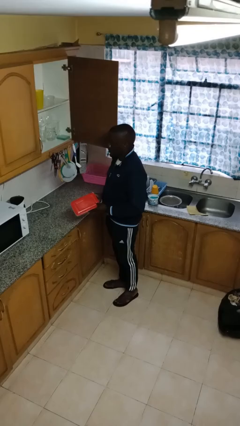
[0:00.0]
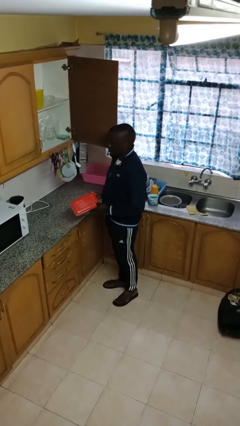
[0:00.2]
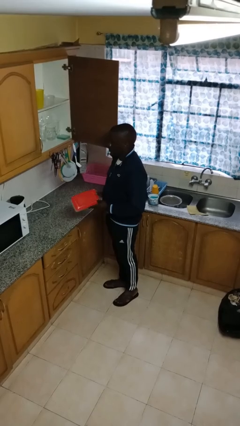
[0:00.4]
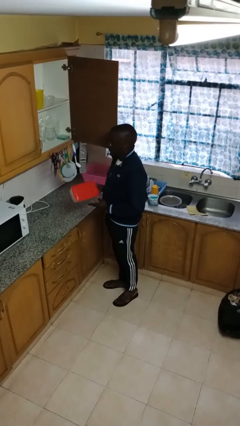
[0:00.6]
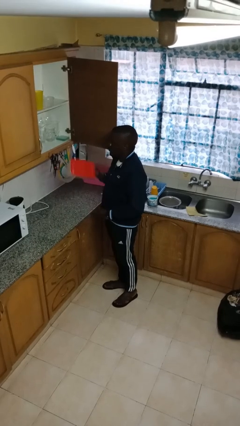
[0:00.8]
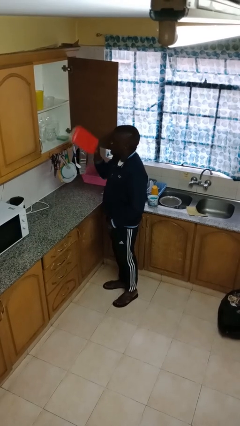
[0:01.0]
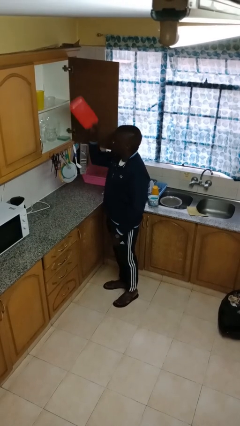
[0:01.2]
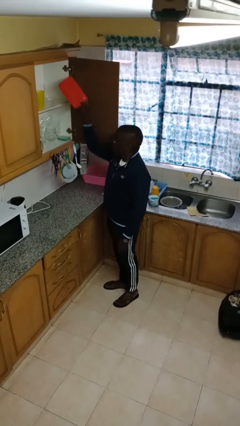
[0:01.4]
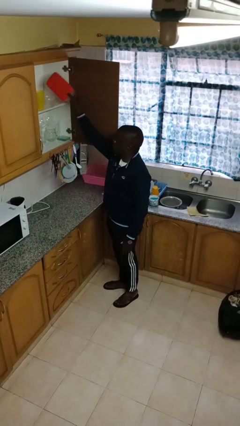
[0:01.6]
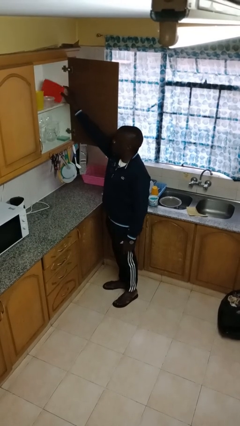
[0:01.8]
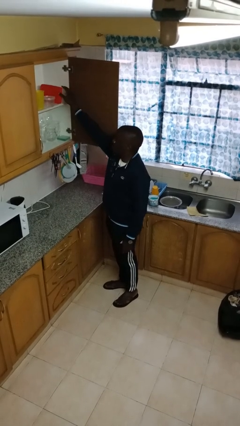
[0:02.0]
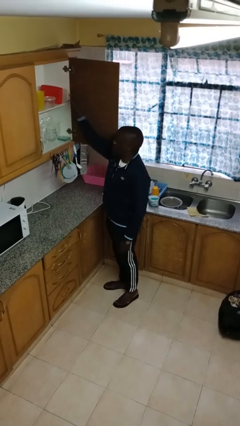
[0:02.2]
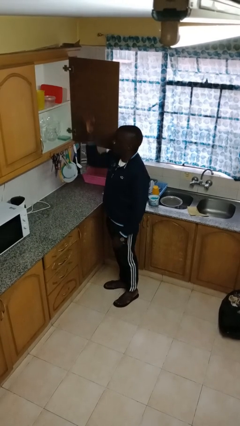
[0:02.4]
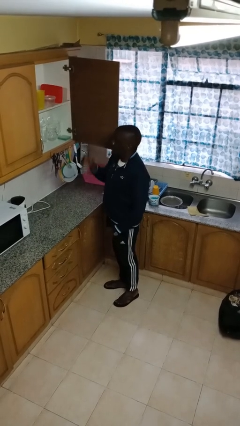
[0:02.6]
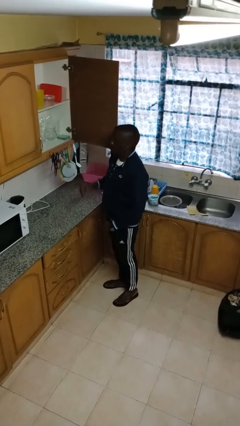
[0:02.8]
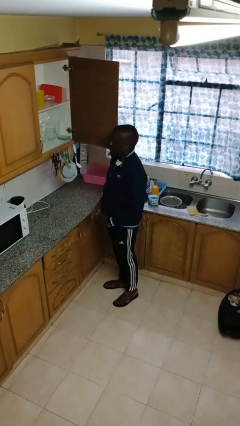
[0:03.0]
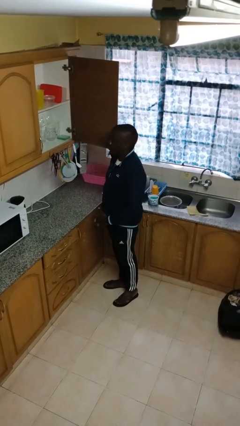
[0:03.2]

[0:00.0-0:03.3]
person puts down object on shelf

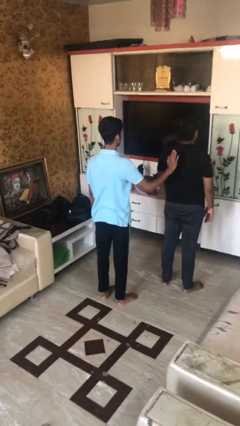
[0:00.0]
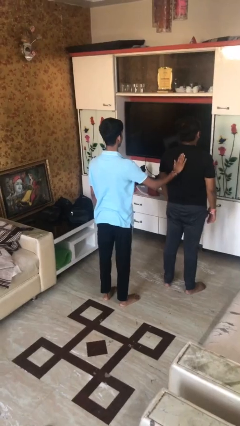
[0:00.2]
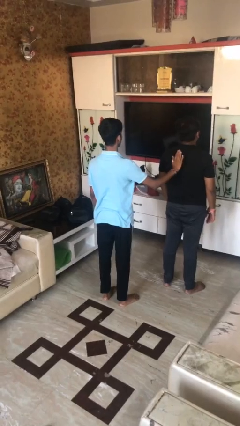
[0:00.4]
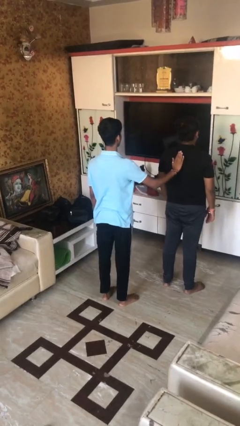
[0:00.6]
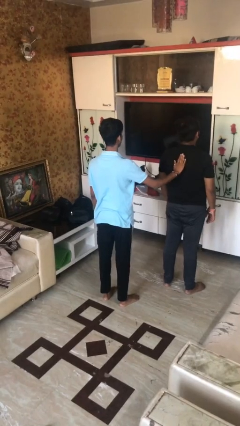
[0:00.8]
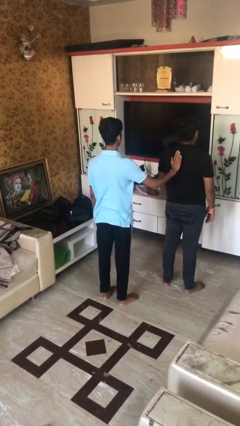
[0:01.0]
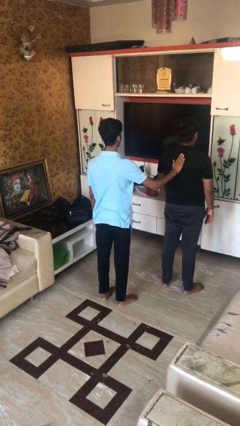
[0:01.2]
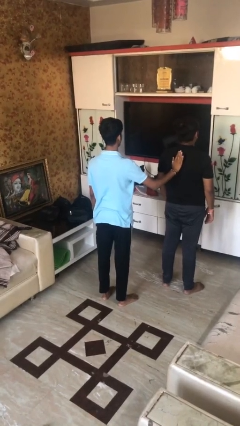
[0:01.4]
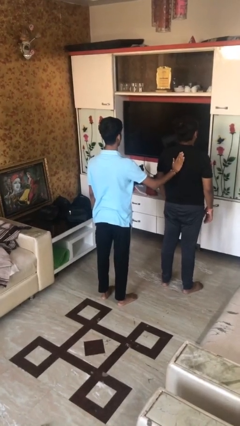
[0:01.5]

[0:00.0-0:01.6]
person touches back of person

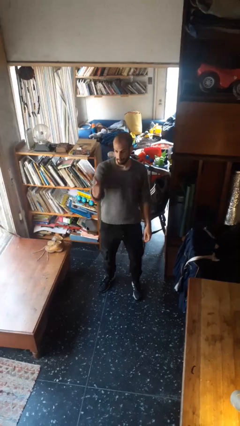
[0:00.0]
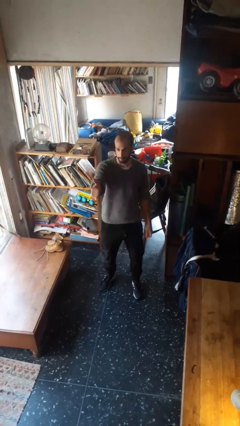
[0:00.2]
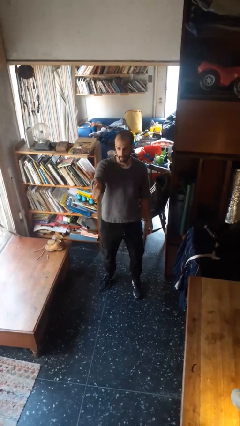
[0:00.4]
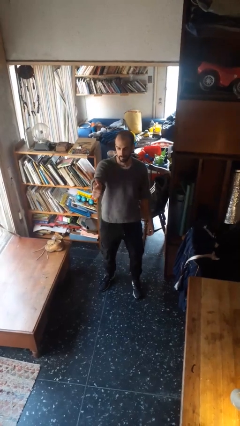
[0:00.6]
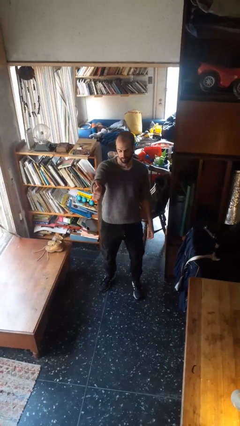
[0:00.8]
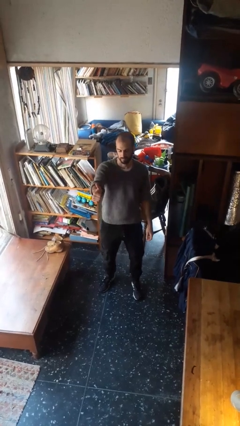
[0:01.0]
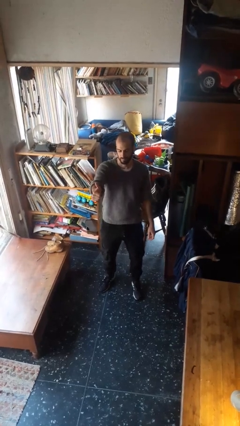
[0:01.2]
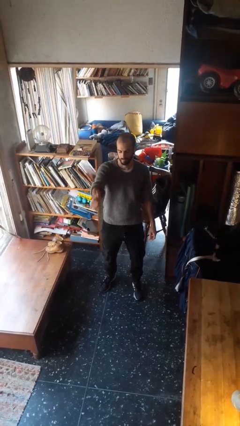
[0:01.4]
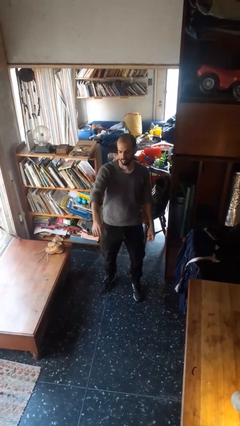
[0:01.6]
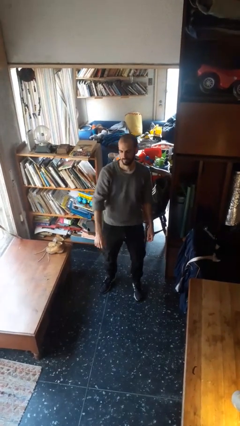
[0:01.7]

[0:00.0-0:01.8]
person gestures thumbs up

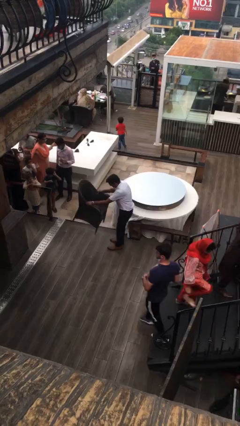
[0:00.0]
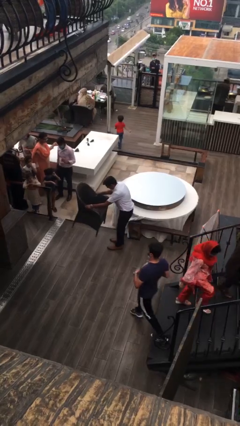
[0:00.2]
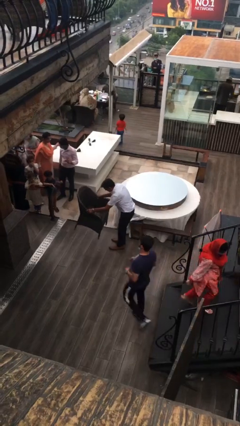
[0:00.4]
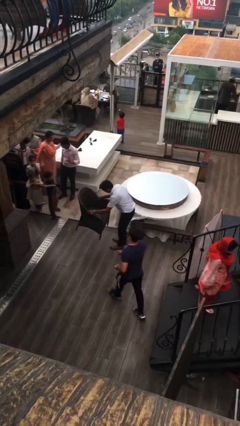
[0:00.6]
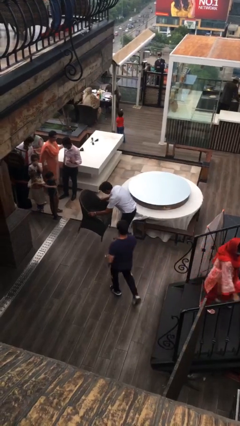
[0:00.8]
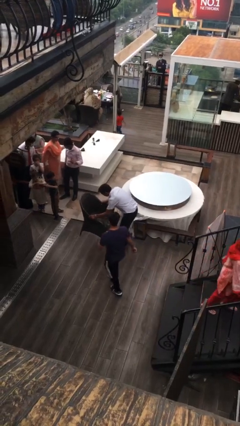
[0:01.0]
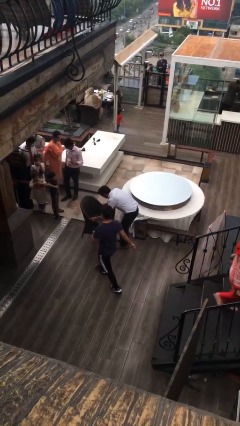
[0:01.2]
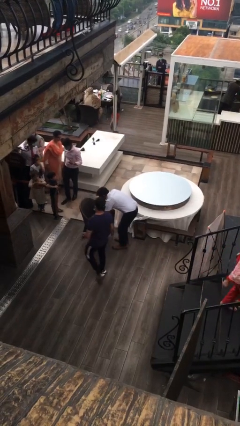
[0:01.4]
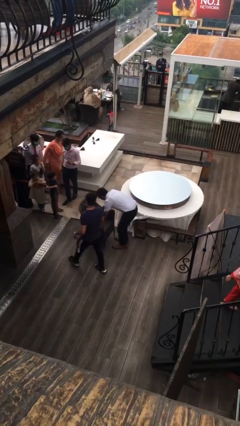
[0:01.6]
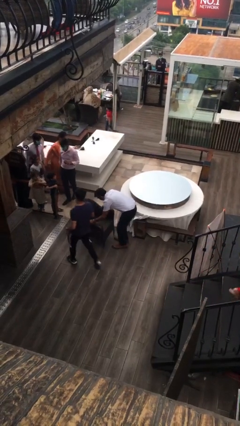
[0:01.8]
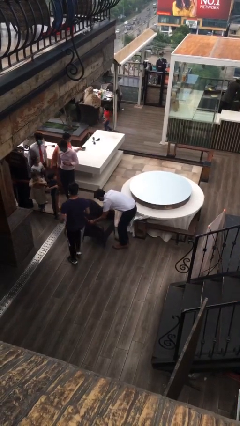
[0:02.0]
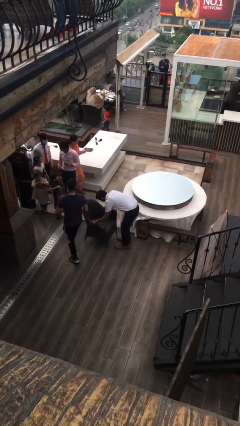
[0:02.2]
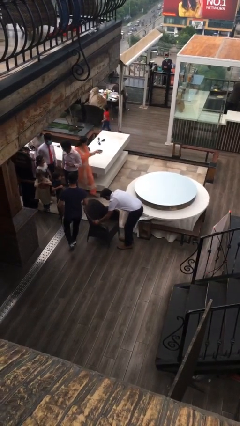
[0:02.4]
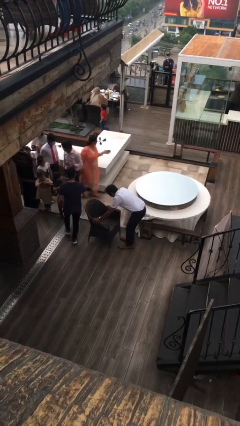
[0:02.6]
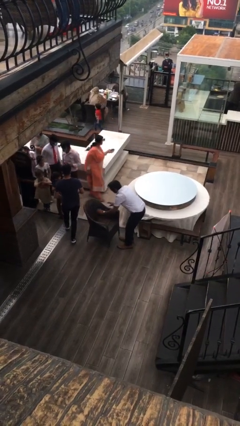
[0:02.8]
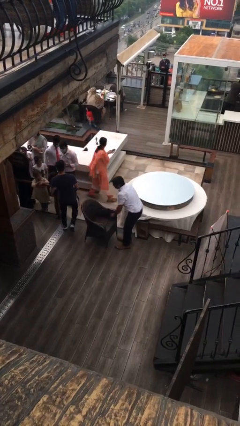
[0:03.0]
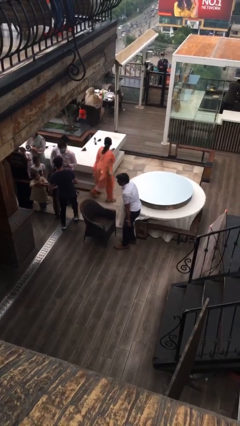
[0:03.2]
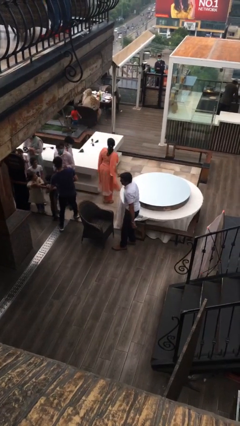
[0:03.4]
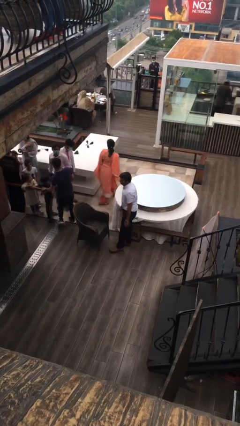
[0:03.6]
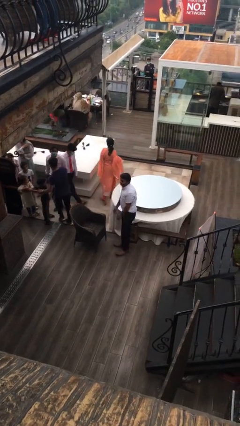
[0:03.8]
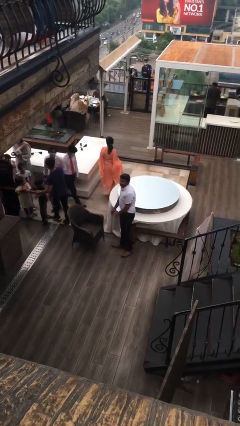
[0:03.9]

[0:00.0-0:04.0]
person puts down object on floor

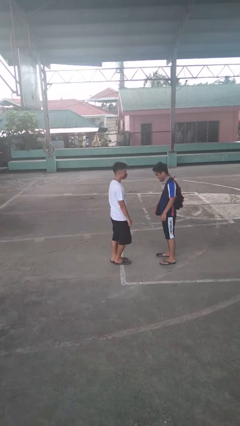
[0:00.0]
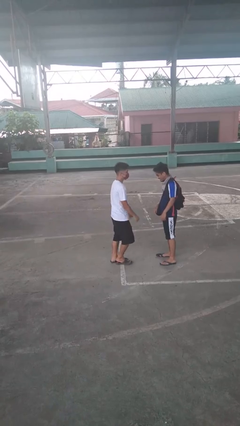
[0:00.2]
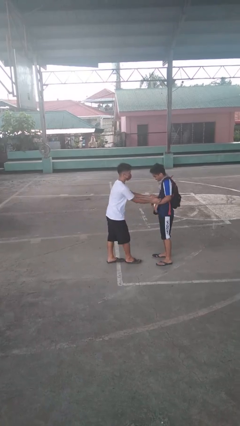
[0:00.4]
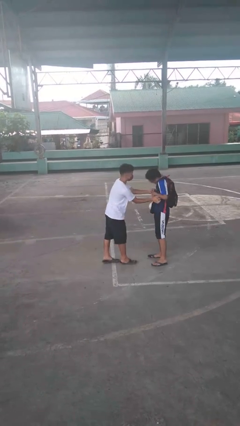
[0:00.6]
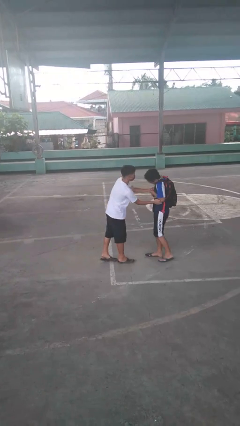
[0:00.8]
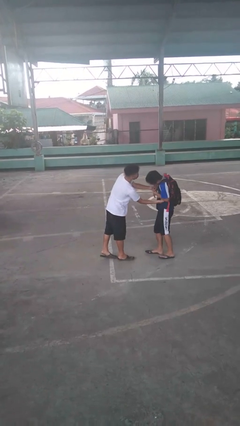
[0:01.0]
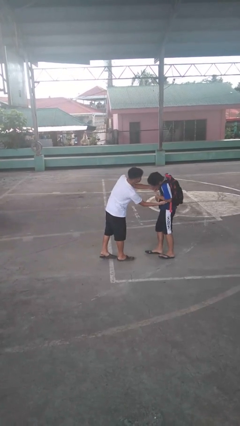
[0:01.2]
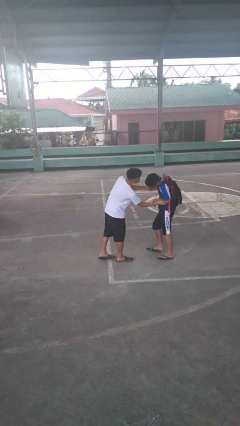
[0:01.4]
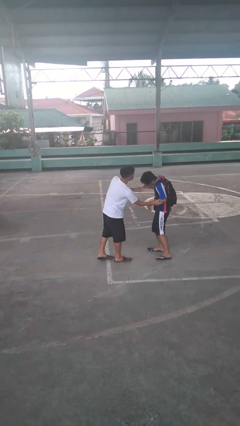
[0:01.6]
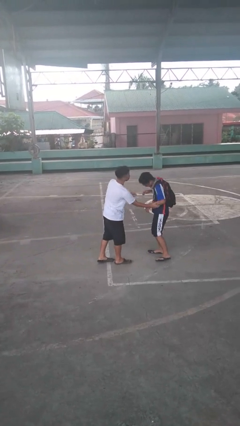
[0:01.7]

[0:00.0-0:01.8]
person tickles person

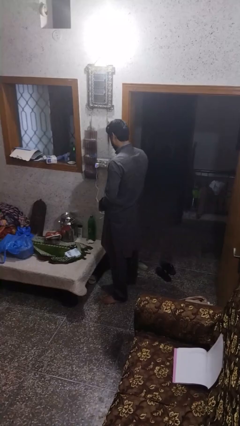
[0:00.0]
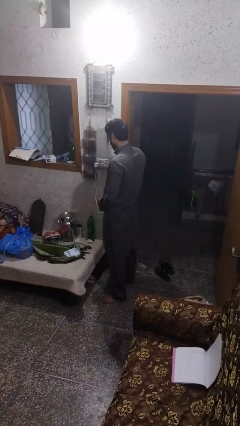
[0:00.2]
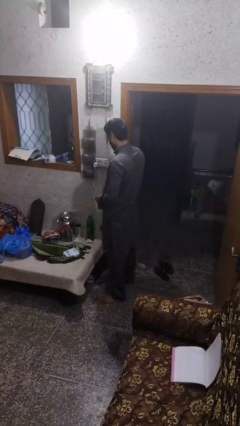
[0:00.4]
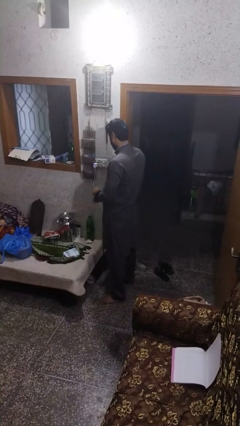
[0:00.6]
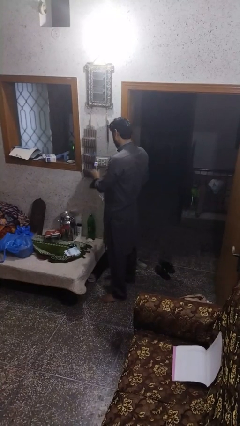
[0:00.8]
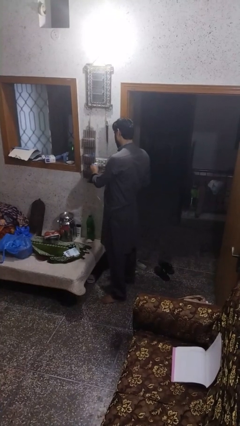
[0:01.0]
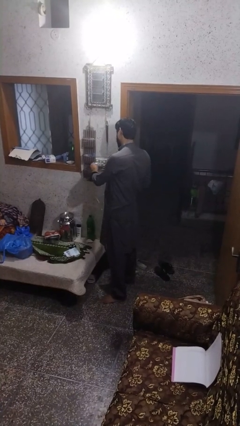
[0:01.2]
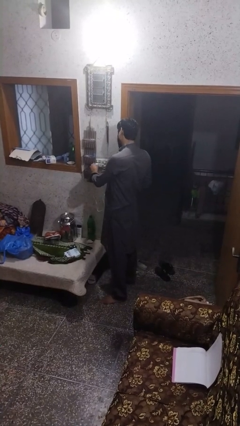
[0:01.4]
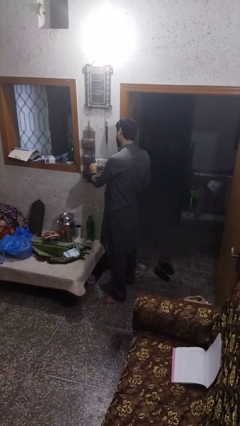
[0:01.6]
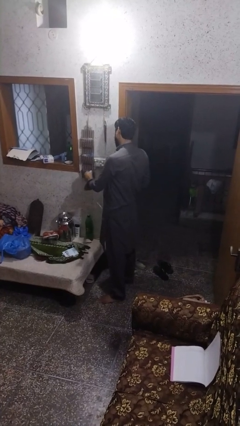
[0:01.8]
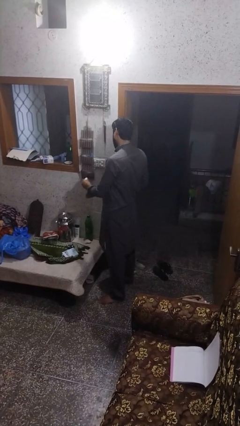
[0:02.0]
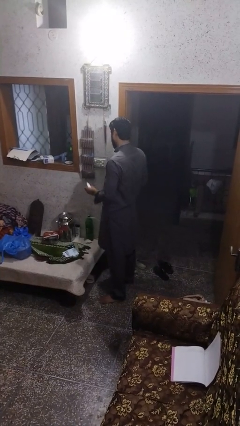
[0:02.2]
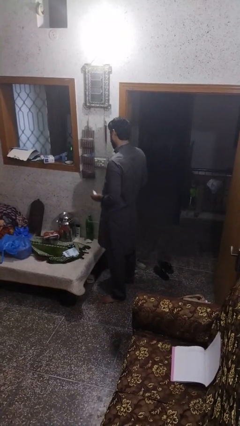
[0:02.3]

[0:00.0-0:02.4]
person unplugs from electrical socket

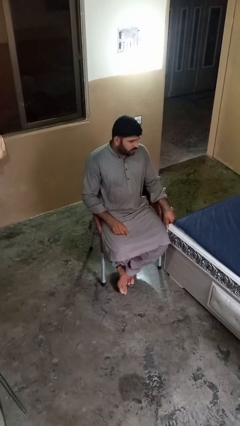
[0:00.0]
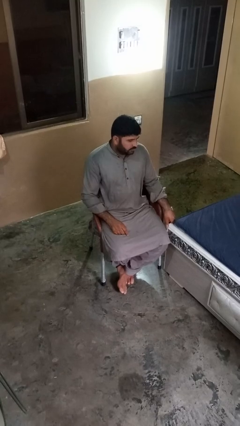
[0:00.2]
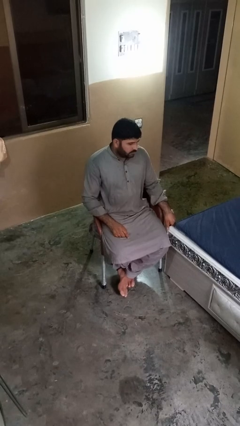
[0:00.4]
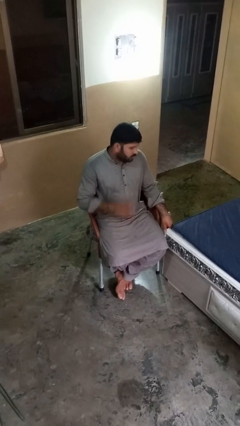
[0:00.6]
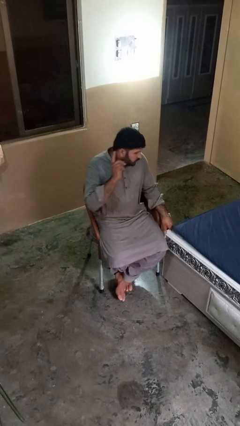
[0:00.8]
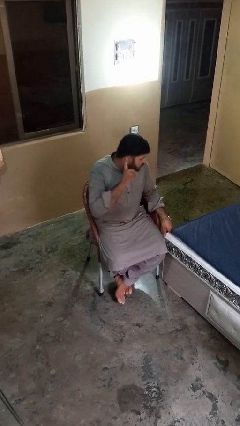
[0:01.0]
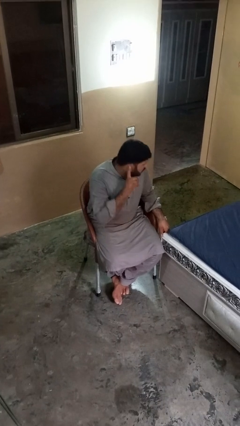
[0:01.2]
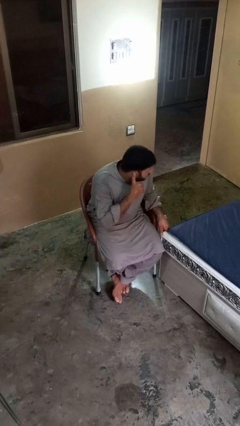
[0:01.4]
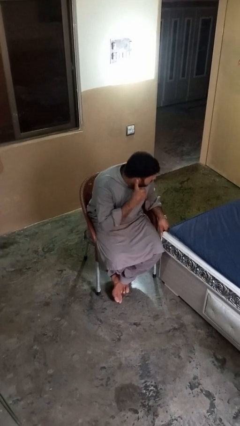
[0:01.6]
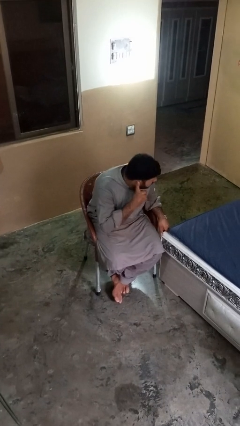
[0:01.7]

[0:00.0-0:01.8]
person gestures listen closely

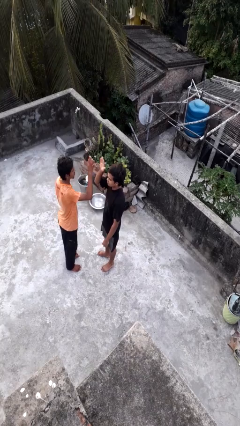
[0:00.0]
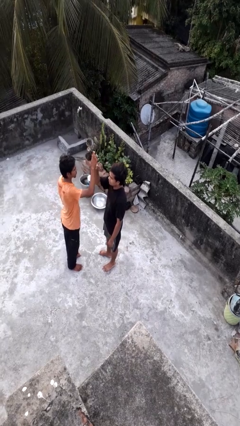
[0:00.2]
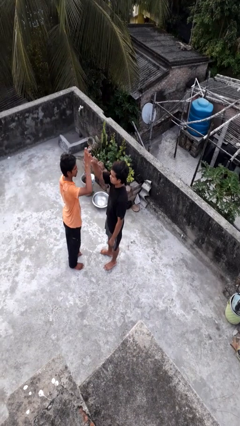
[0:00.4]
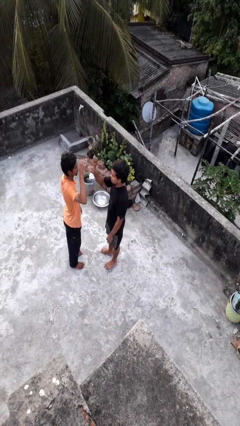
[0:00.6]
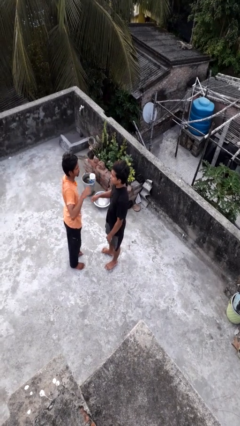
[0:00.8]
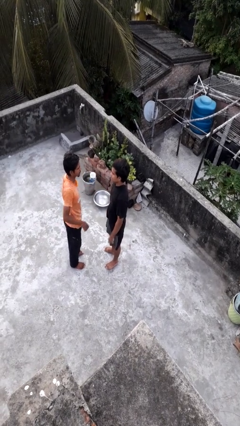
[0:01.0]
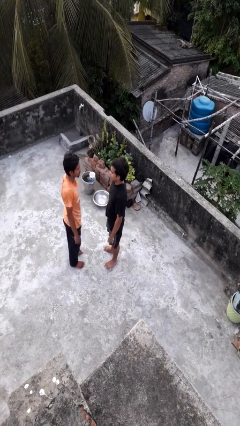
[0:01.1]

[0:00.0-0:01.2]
person highfives hand
